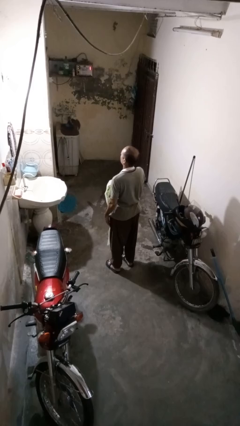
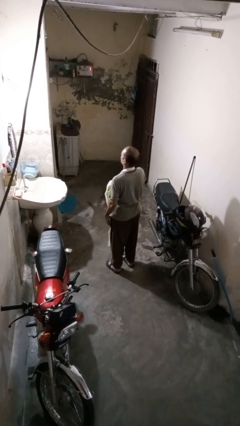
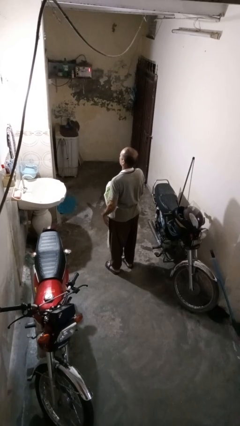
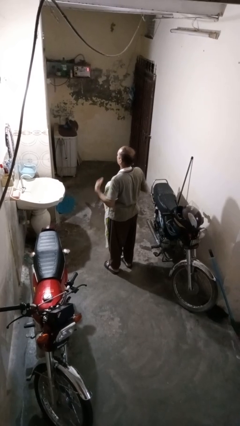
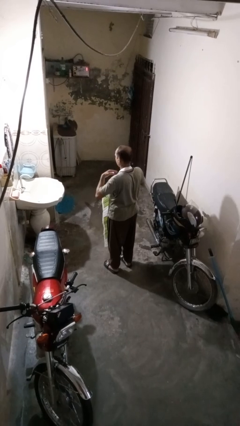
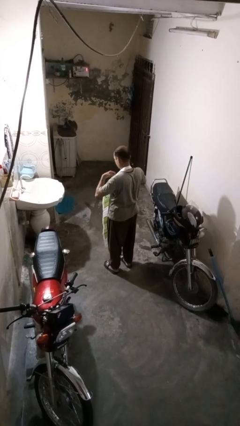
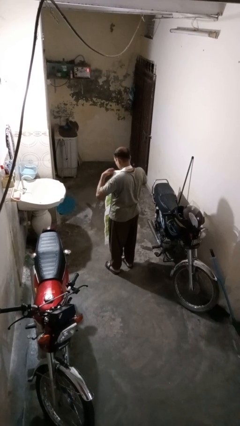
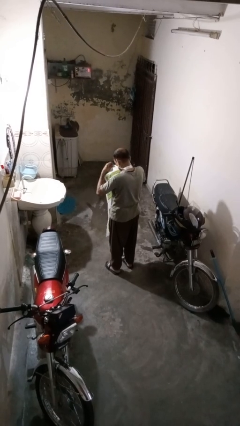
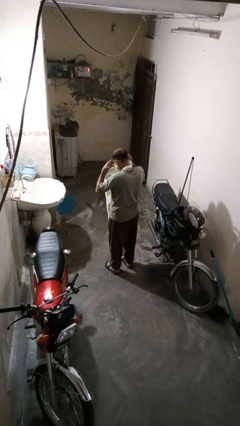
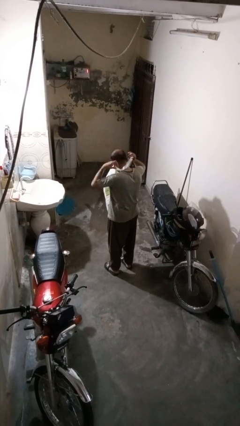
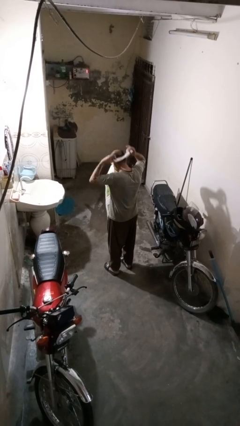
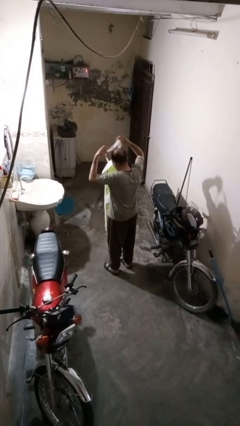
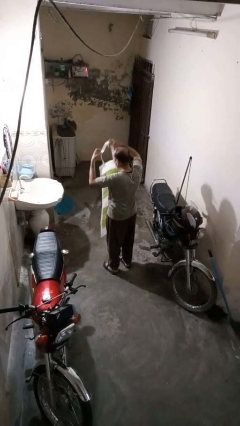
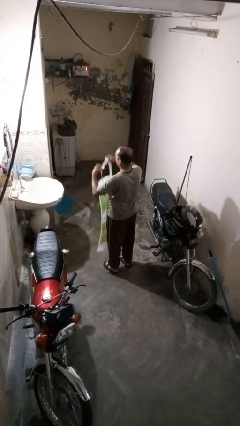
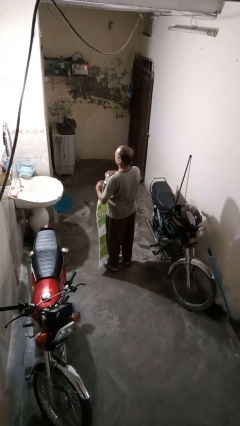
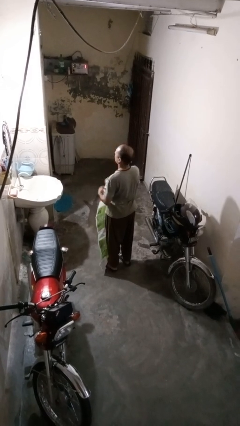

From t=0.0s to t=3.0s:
person takes off apron

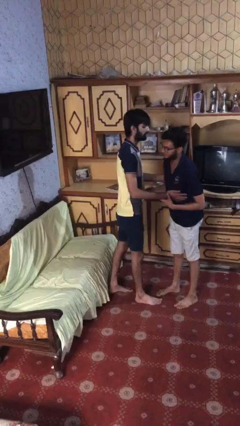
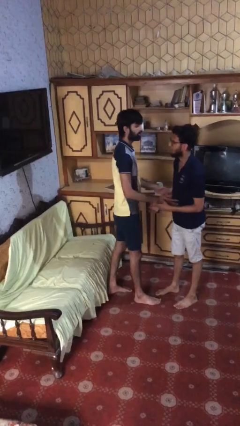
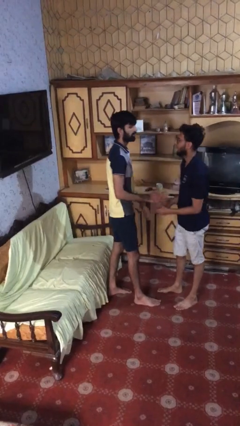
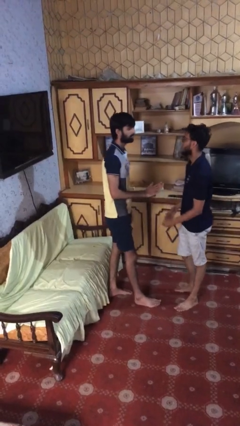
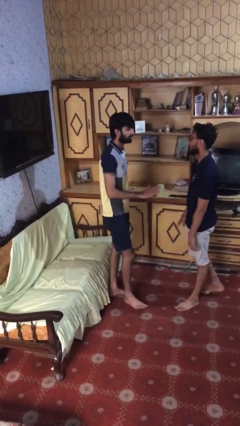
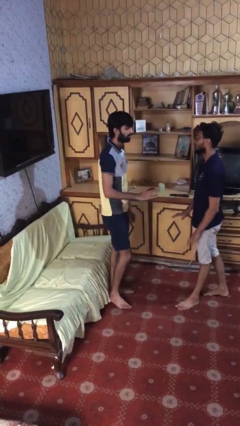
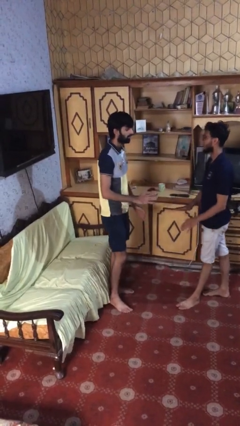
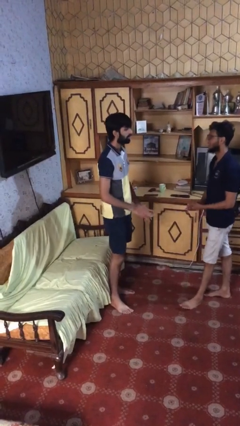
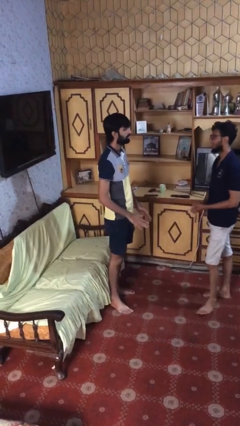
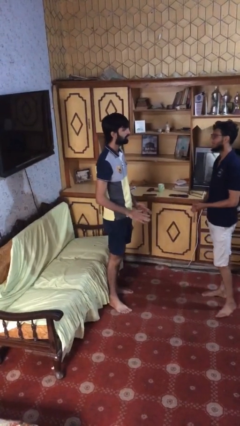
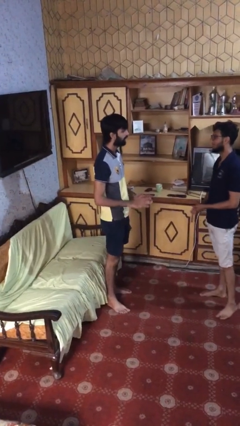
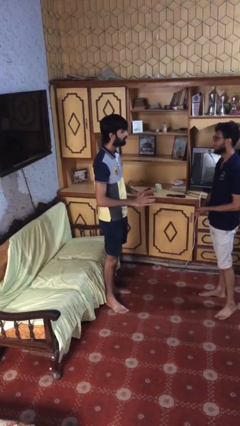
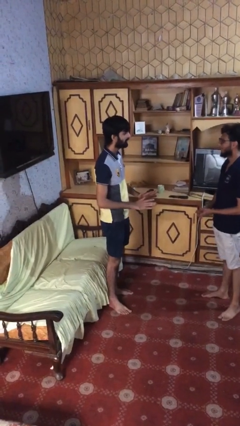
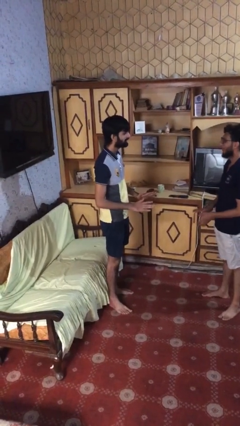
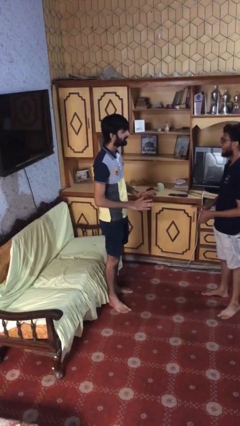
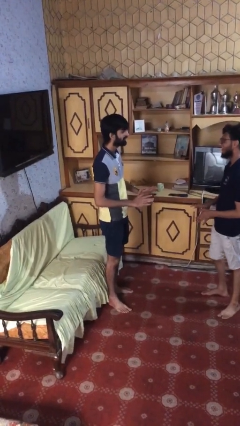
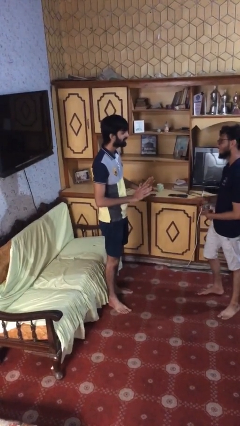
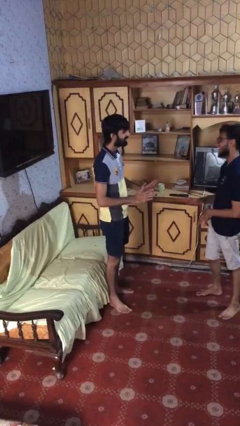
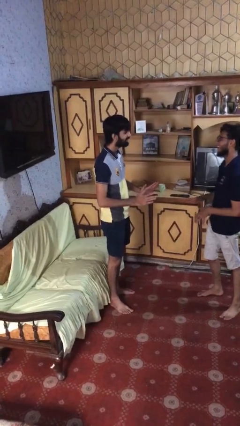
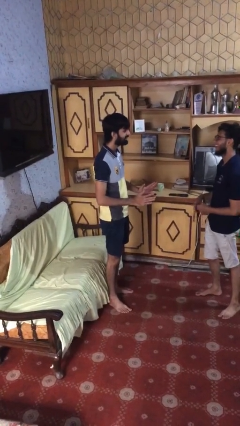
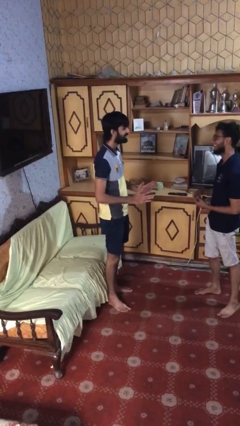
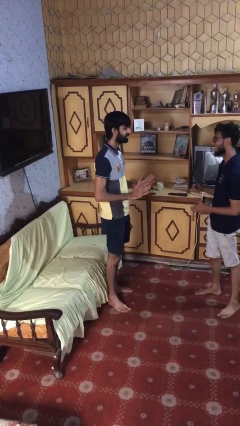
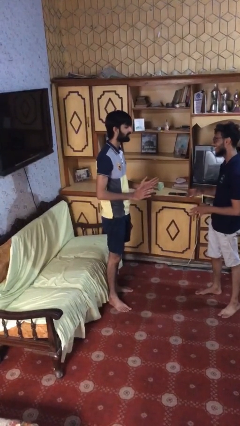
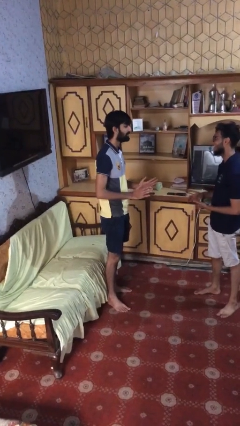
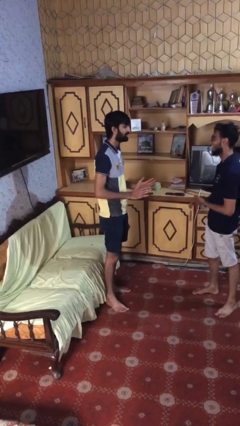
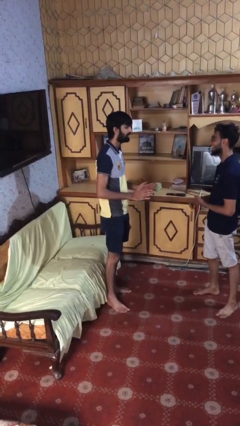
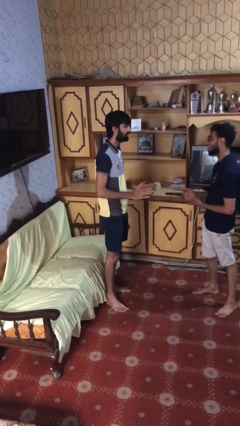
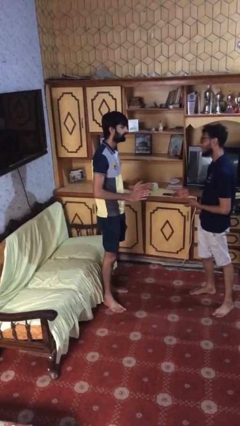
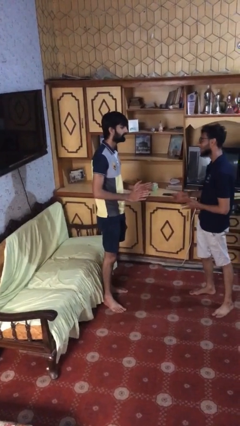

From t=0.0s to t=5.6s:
person talks to person

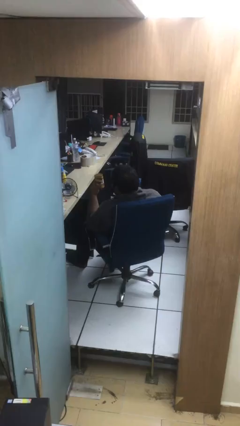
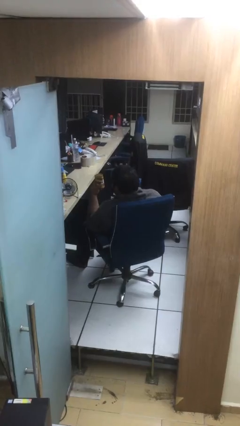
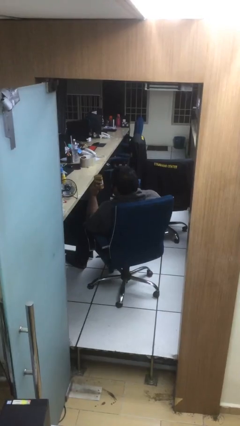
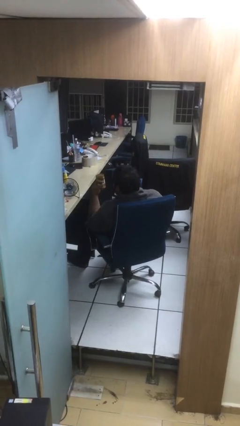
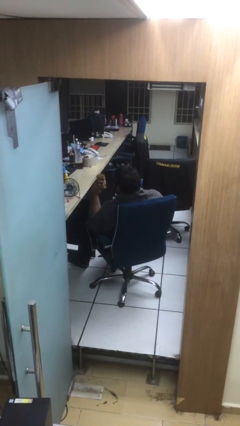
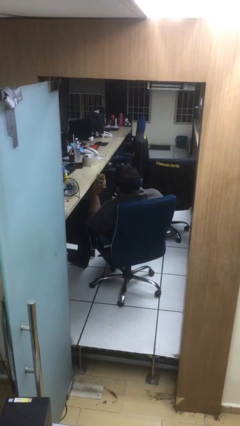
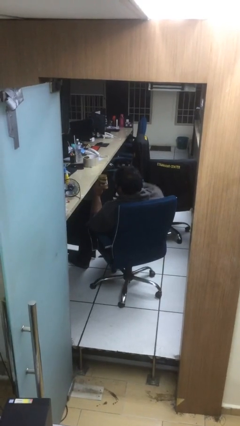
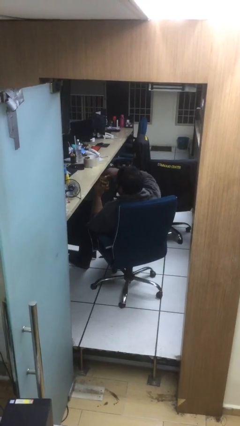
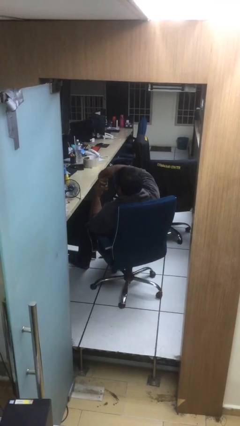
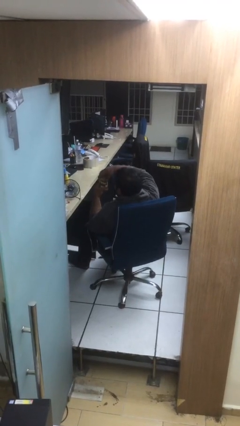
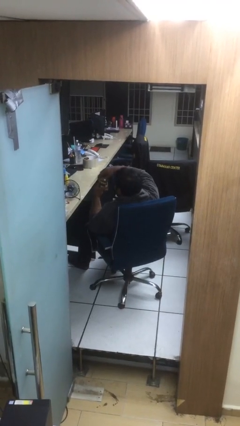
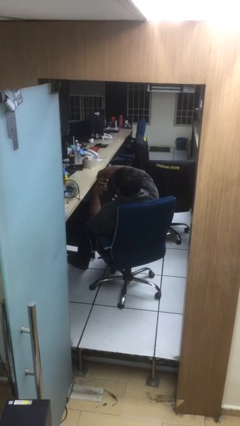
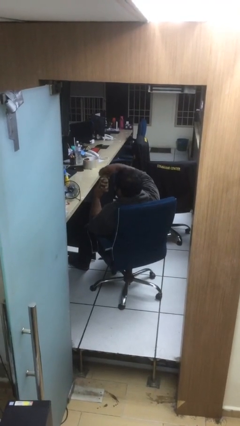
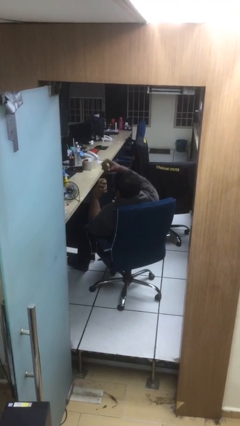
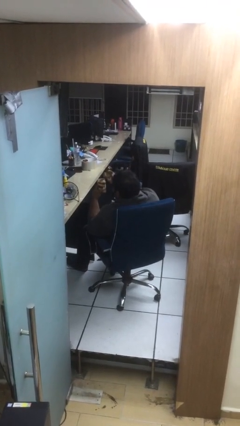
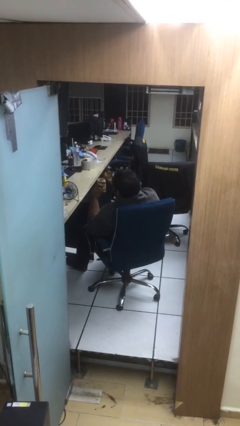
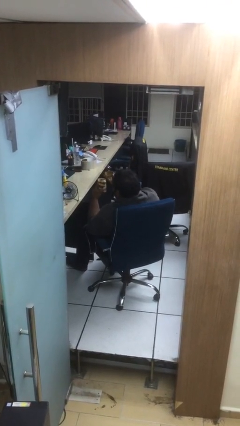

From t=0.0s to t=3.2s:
person opens jar

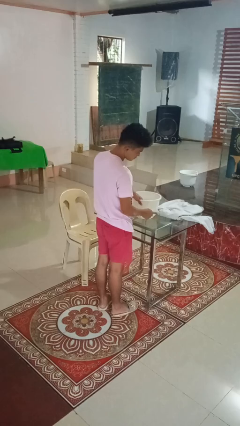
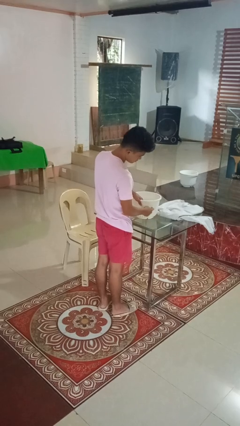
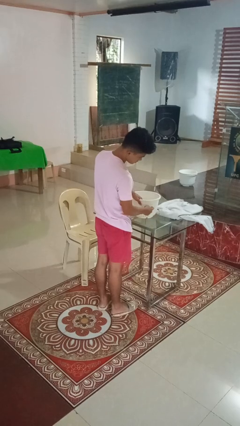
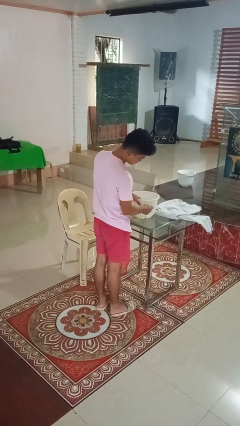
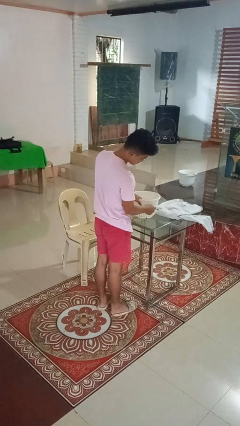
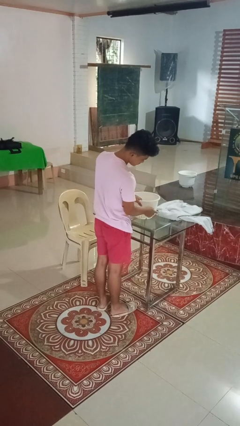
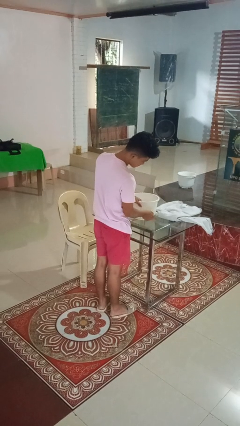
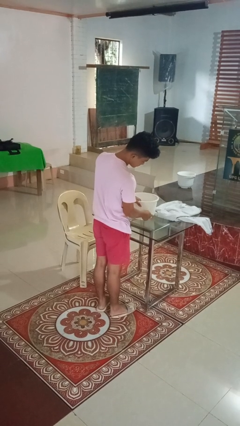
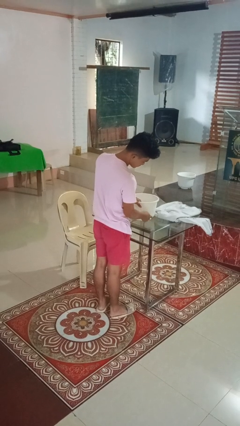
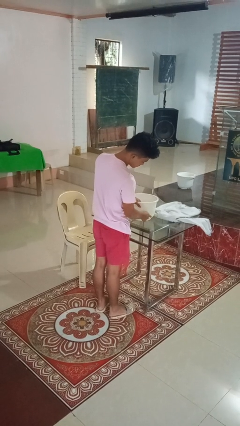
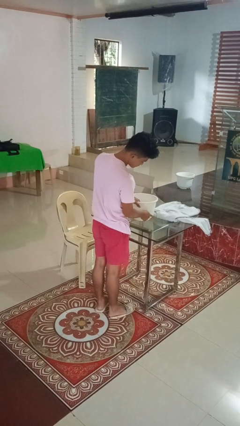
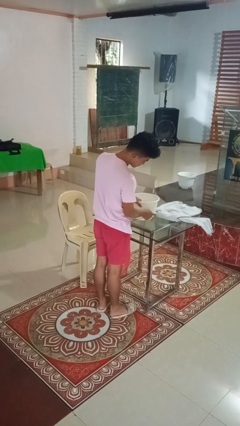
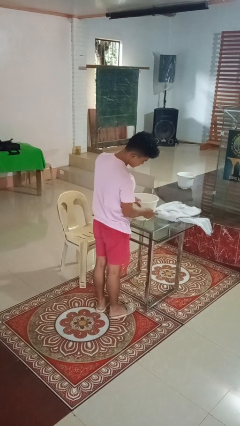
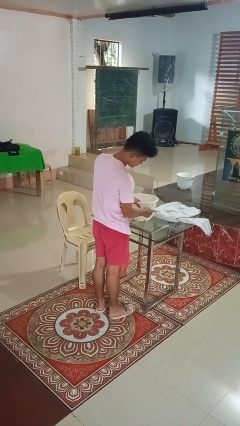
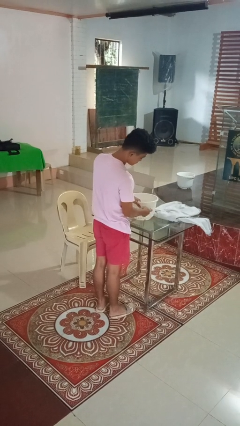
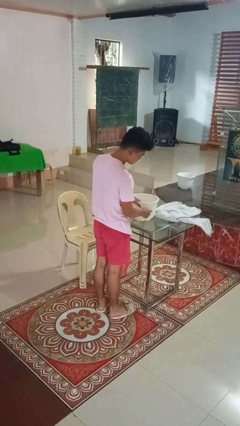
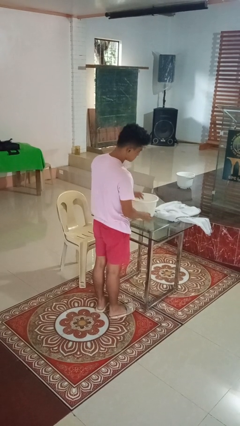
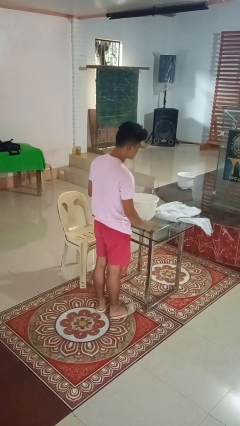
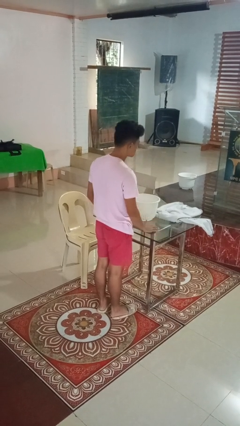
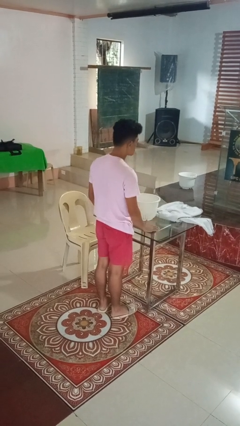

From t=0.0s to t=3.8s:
person taps object with finger

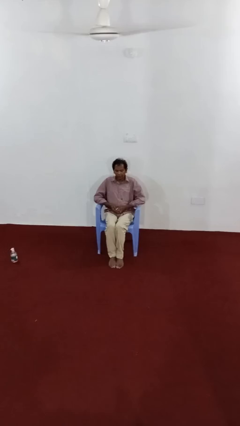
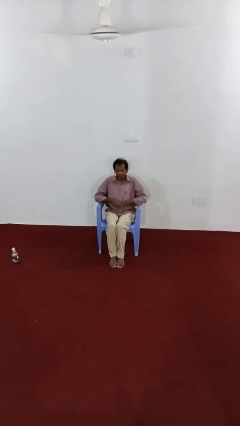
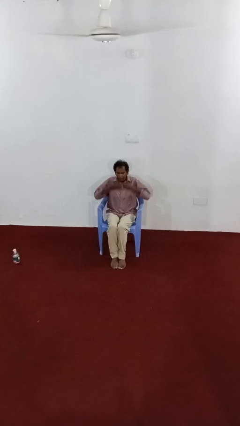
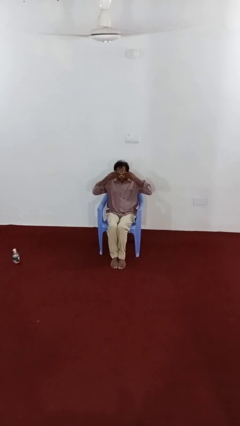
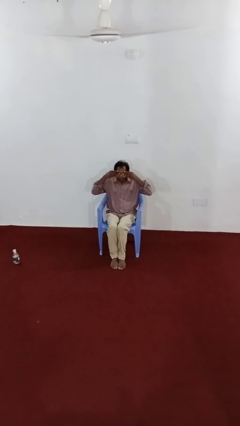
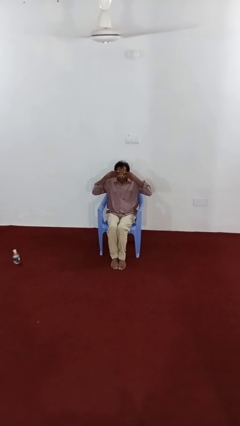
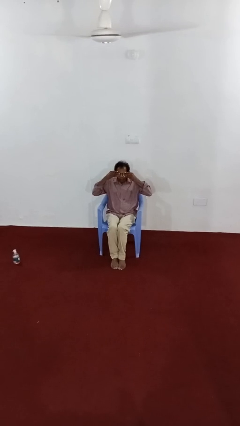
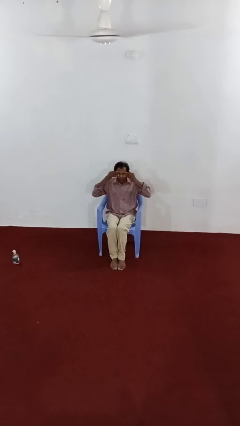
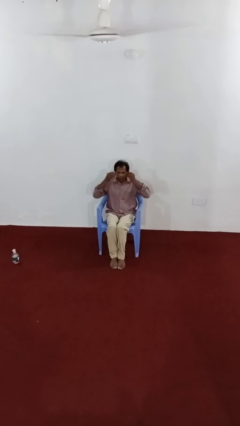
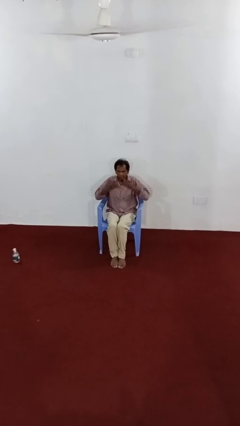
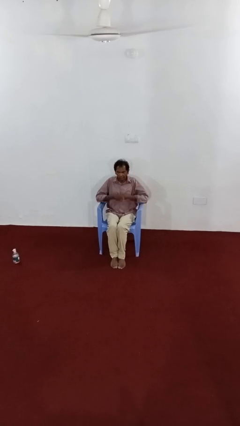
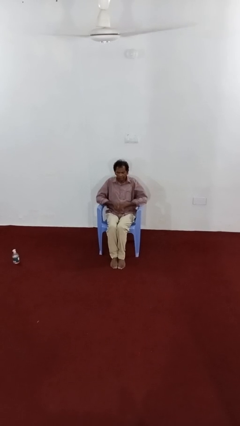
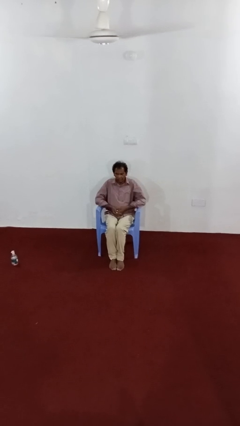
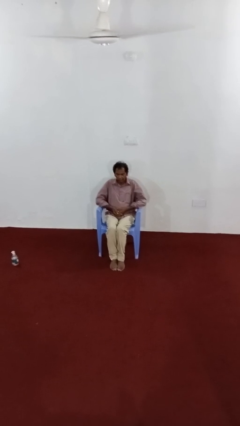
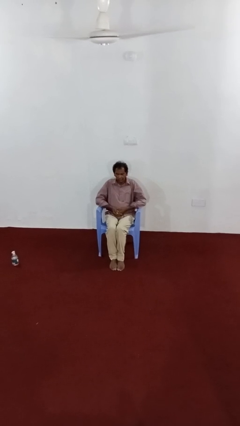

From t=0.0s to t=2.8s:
person rubs eyes
